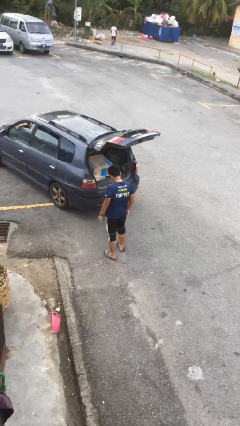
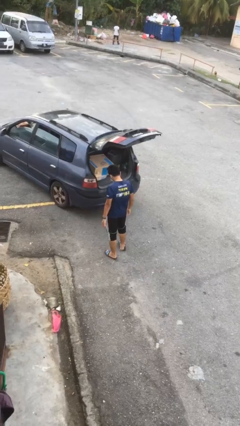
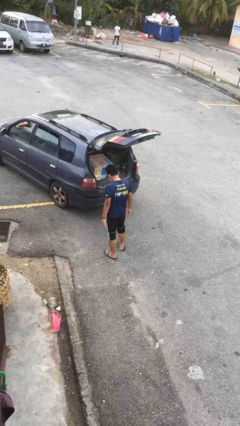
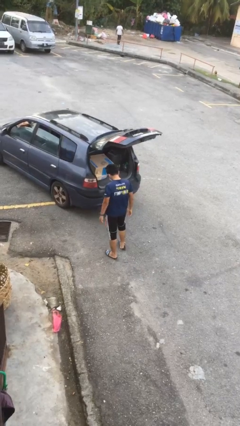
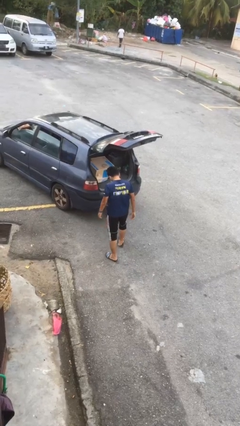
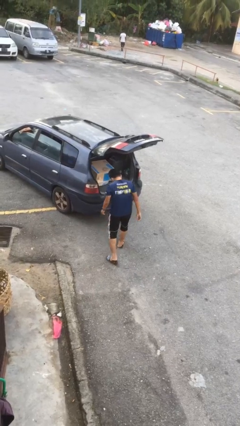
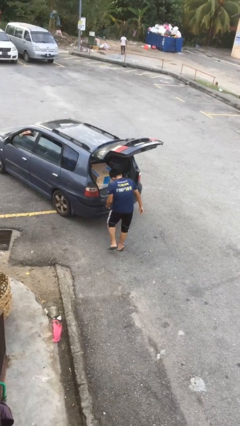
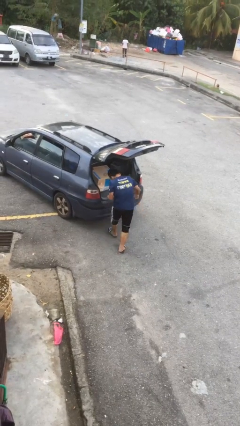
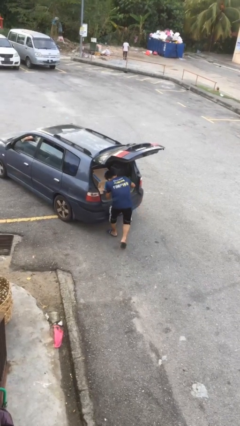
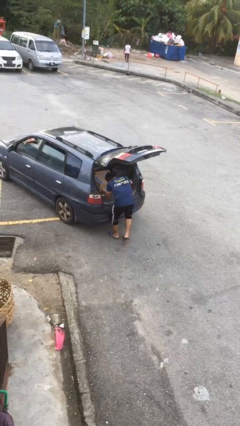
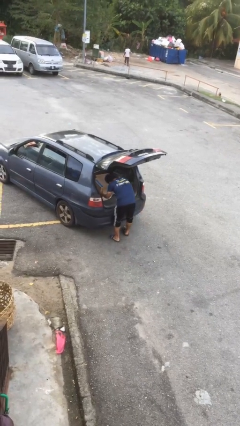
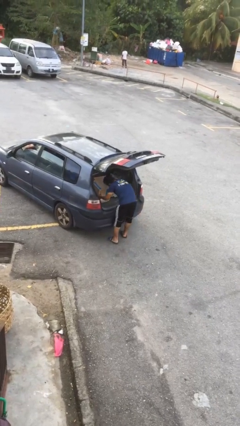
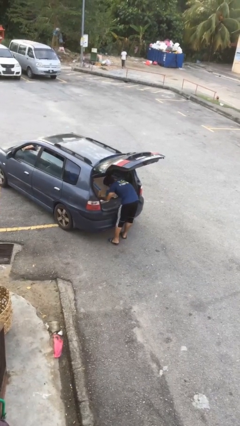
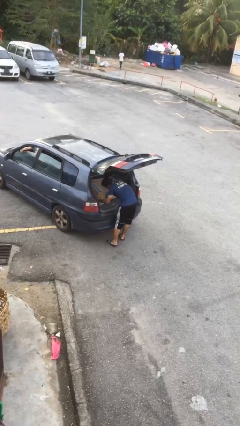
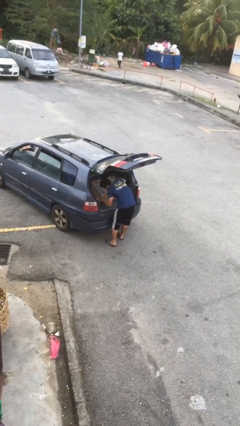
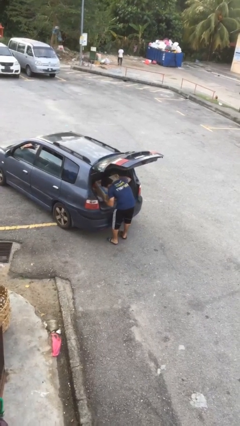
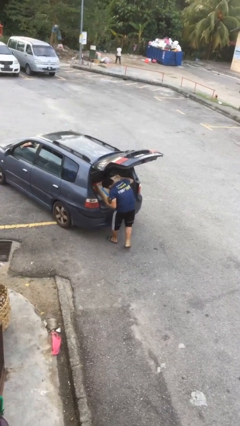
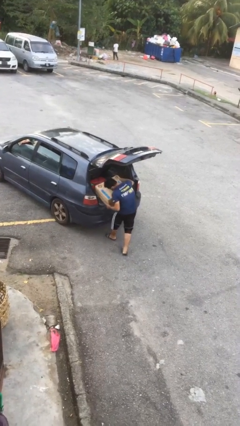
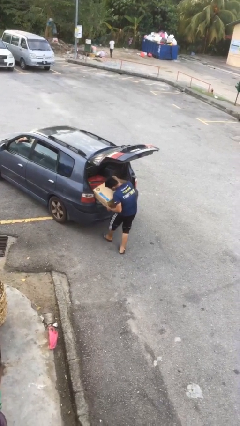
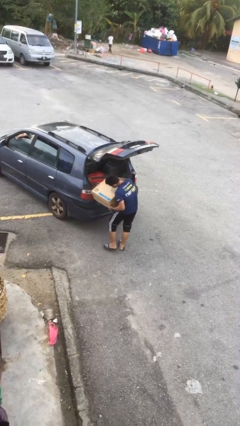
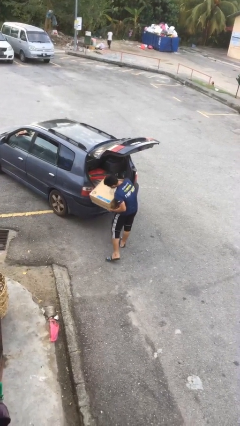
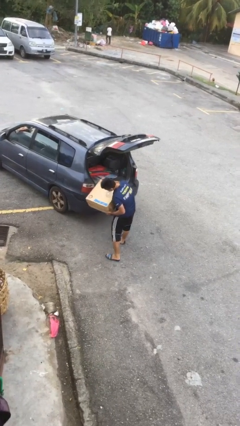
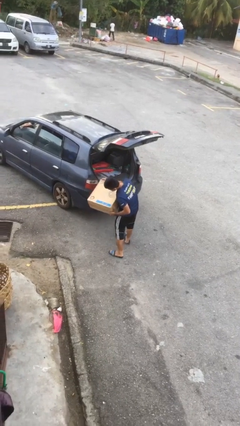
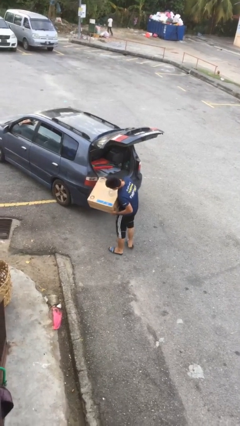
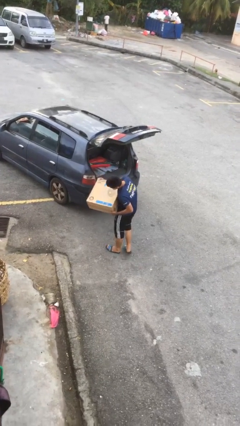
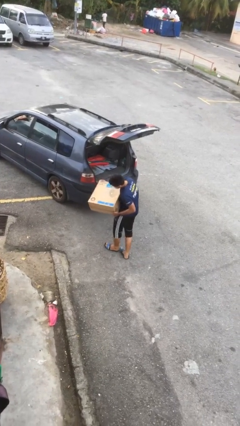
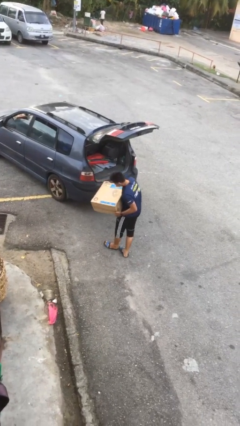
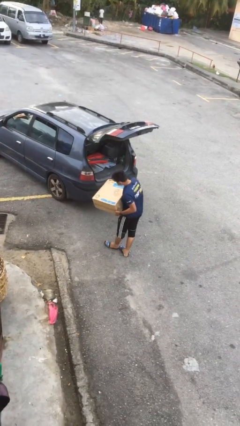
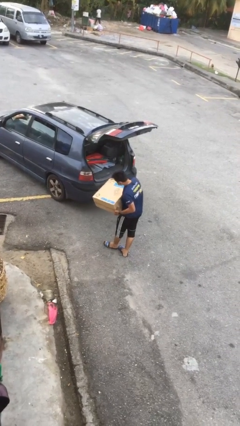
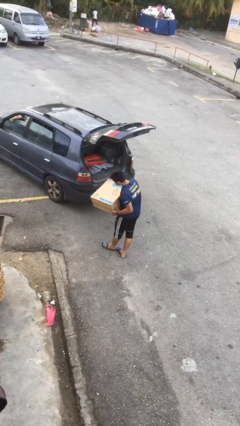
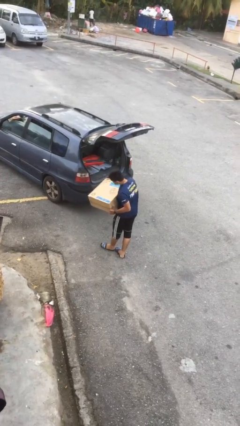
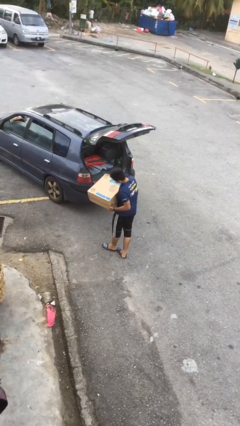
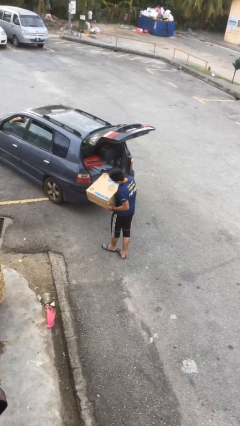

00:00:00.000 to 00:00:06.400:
person unloads car

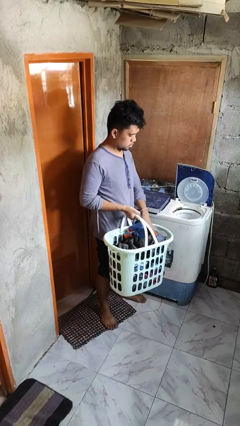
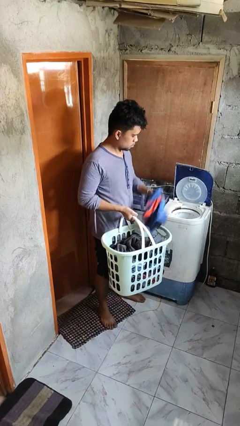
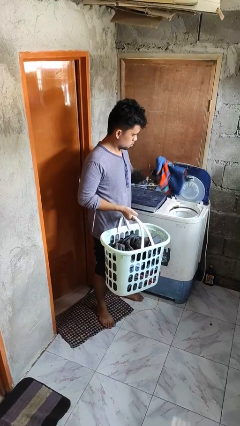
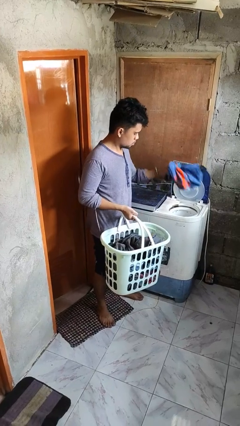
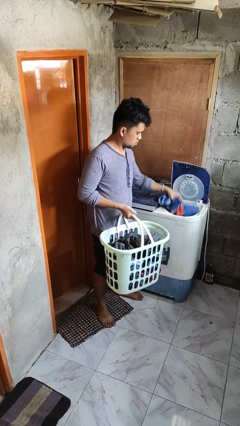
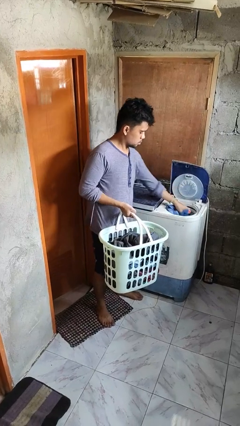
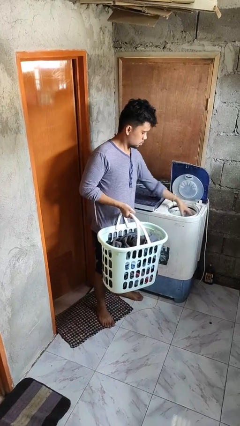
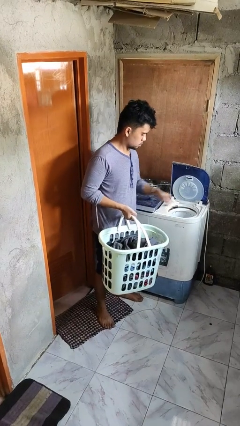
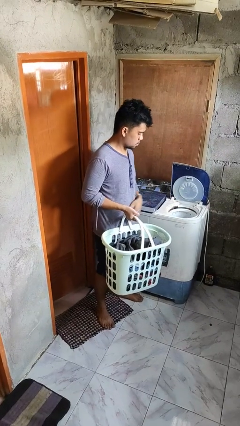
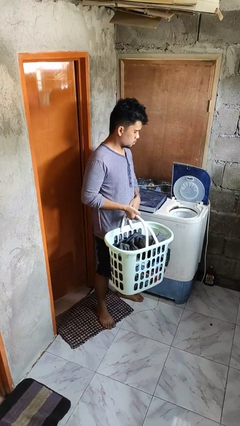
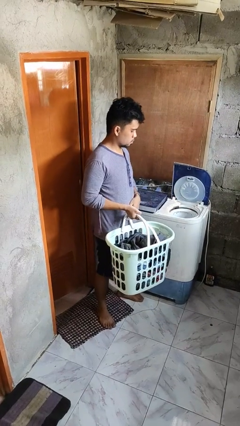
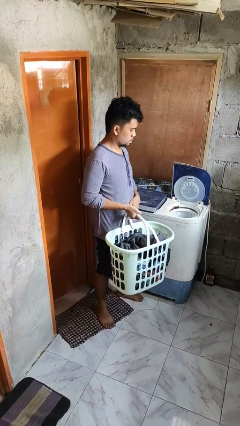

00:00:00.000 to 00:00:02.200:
person loads dryer

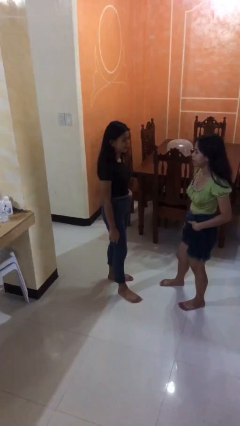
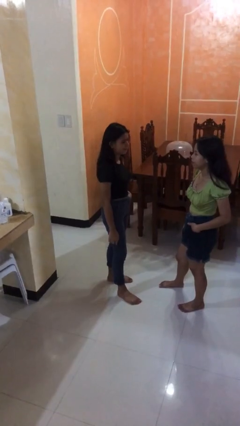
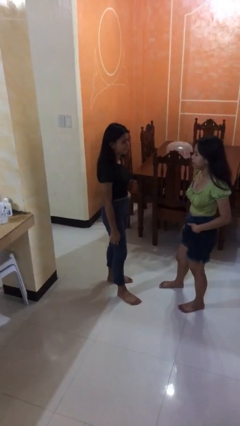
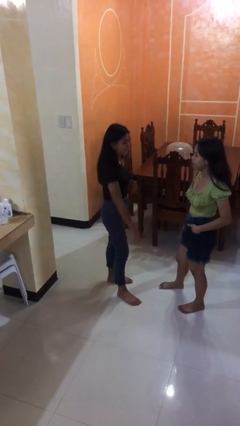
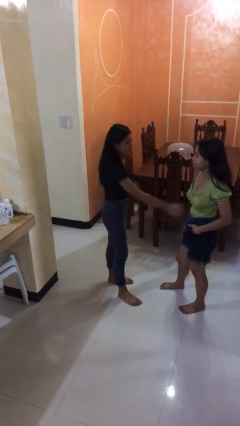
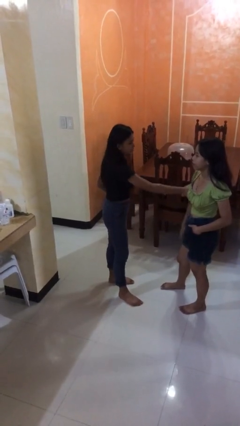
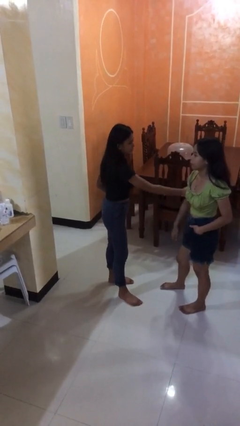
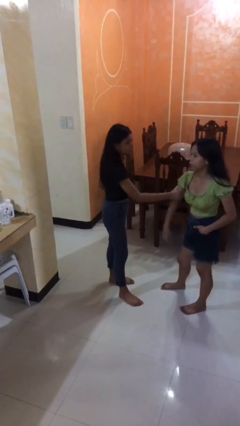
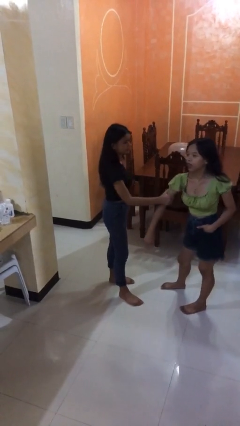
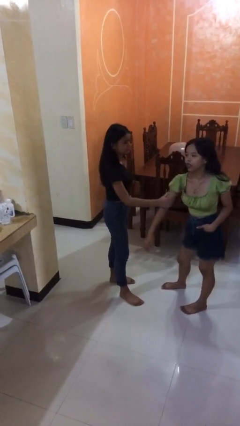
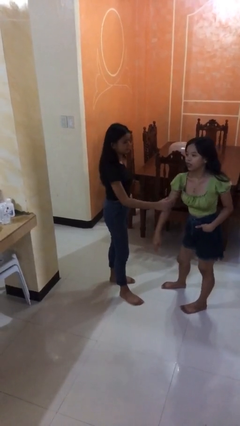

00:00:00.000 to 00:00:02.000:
person grabs person by bicep

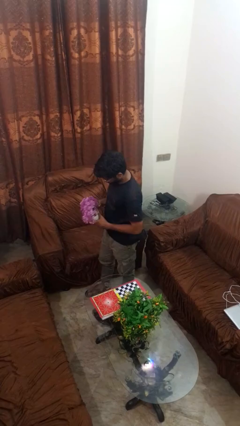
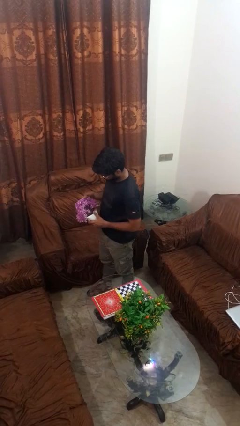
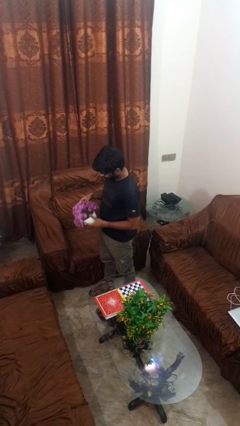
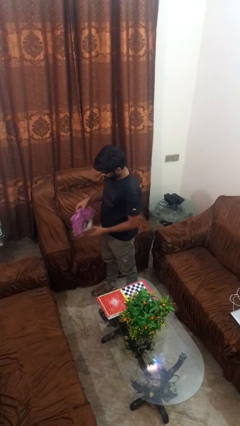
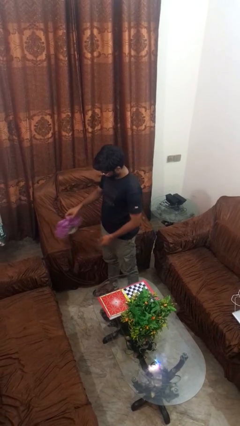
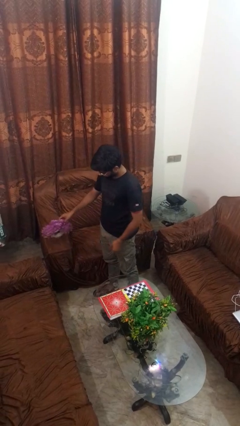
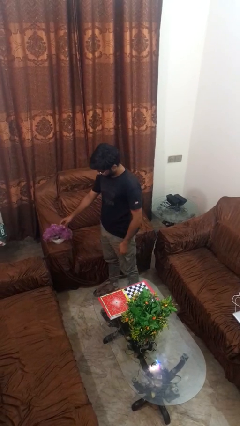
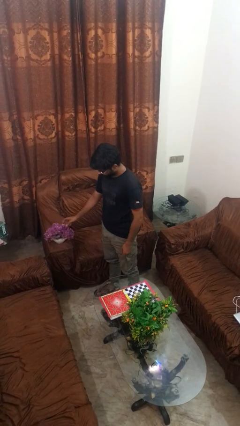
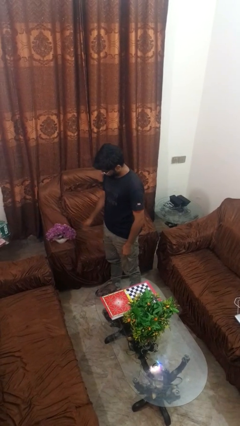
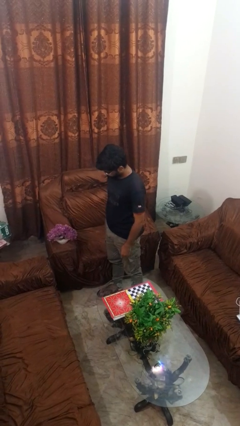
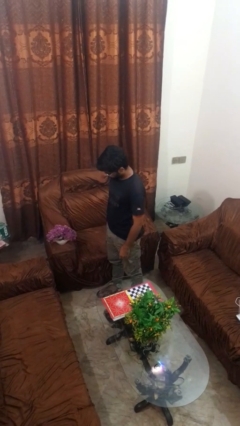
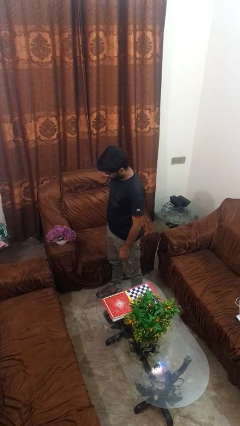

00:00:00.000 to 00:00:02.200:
person puts down object on couch

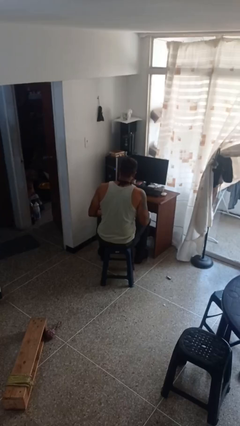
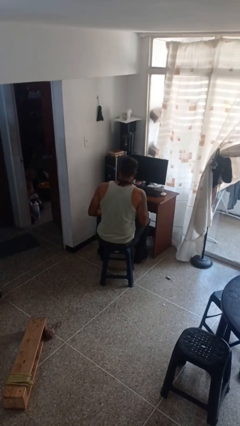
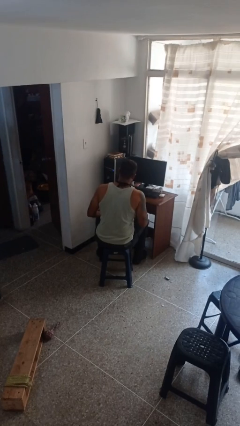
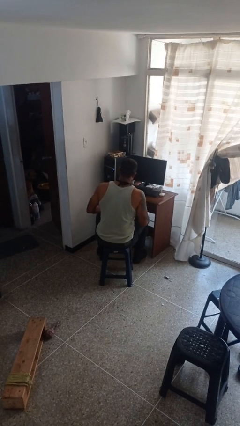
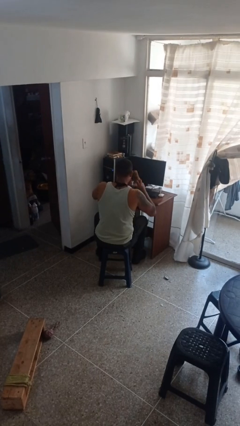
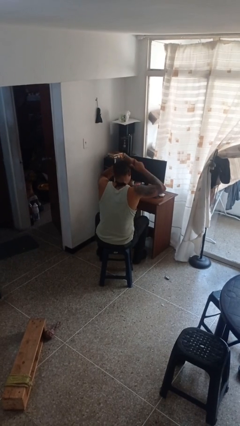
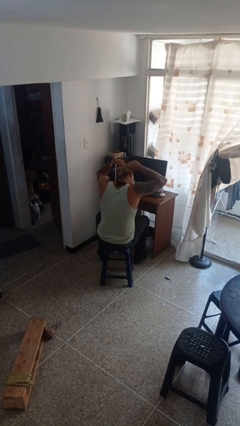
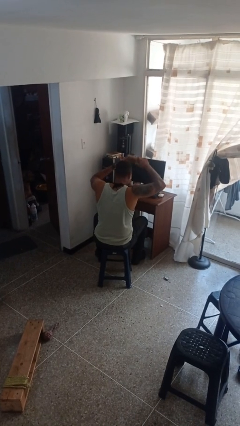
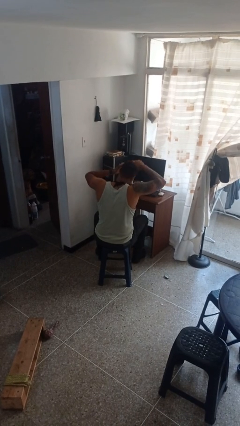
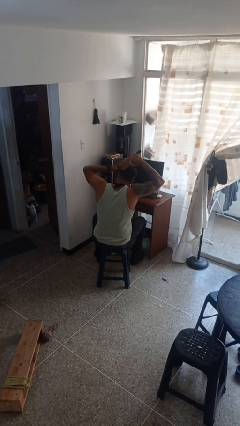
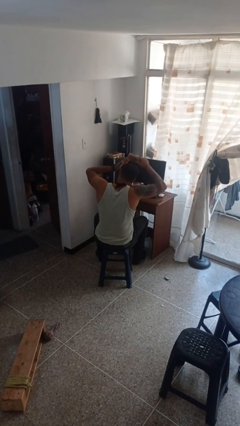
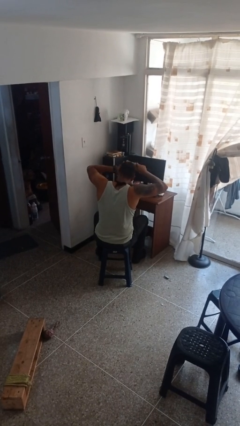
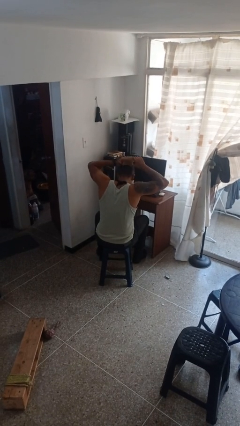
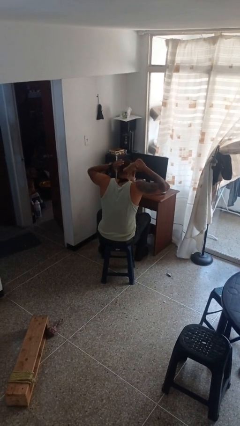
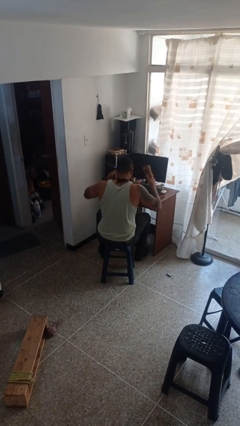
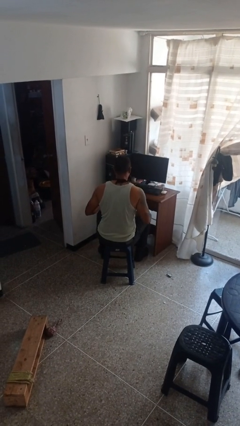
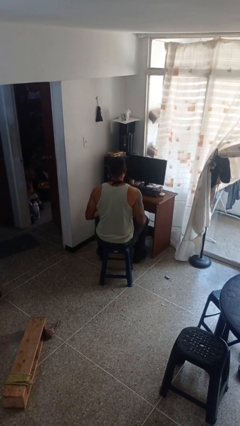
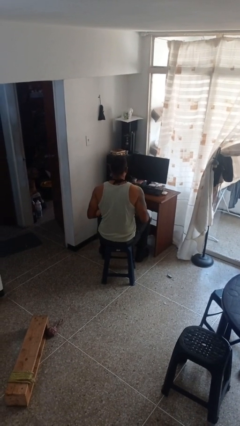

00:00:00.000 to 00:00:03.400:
person brushes hair

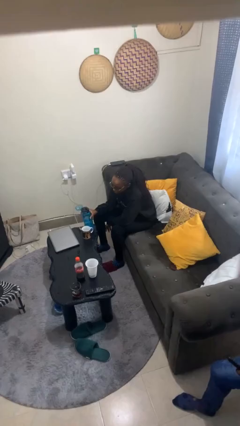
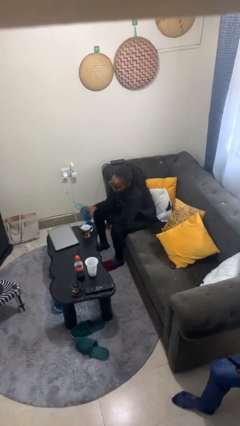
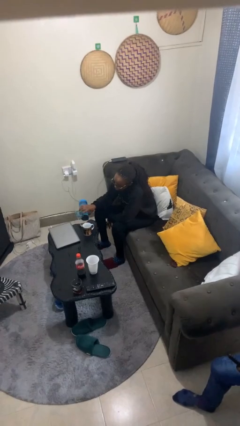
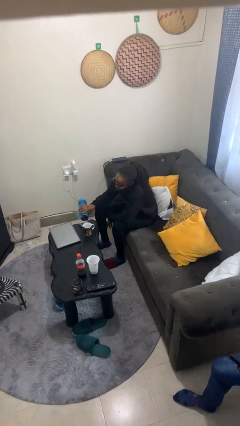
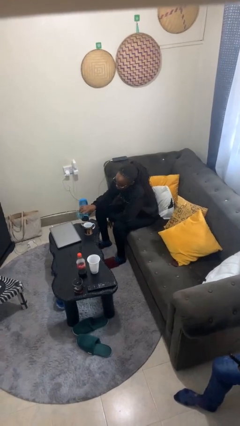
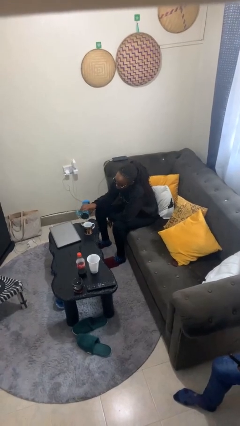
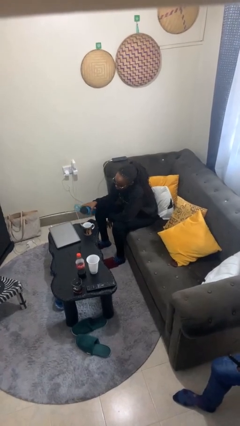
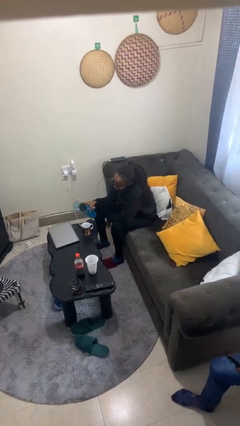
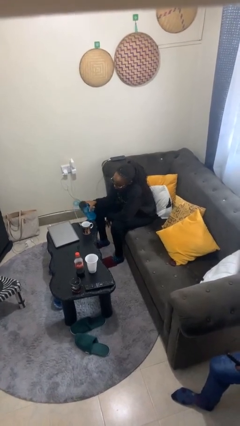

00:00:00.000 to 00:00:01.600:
person pours liquid into cup
